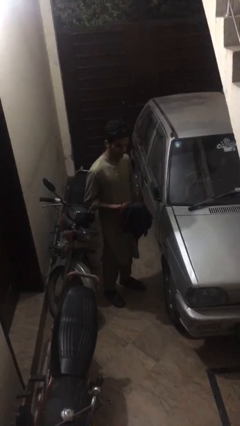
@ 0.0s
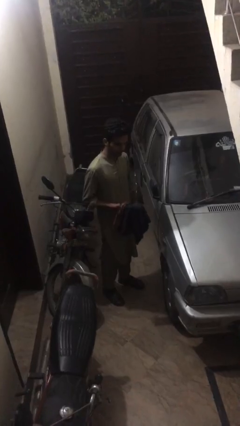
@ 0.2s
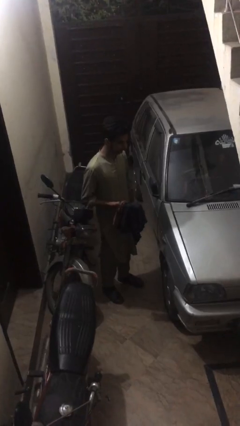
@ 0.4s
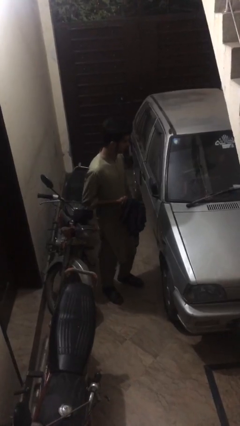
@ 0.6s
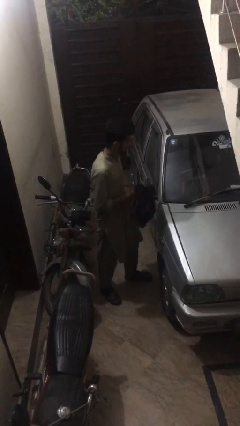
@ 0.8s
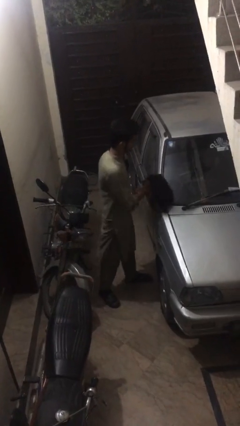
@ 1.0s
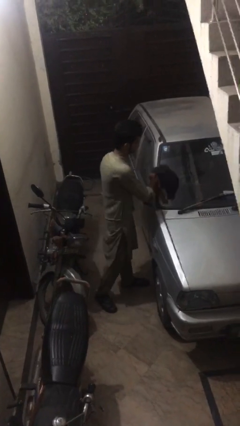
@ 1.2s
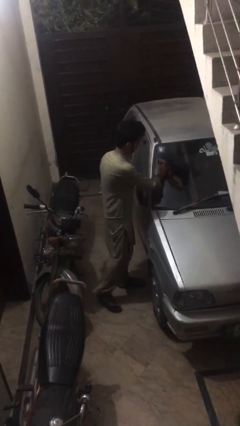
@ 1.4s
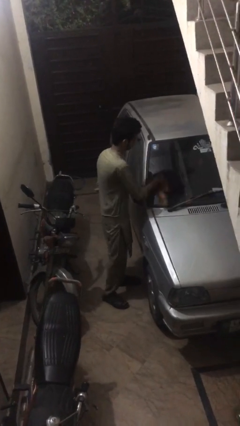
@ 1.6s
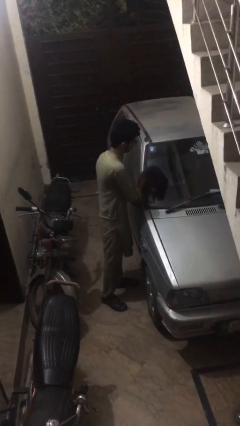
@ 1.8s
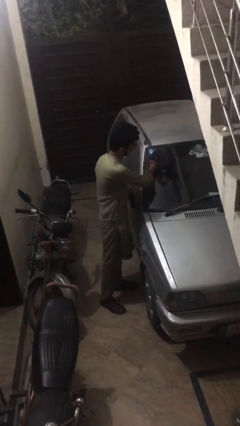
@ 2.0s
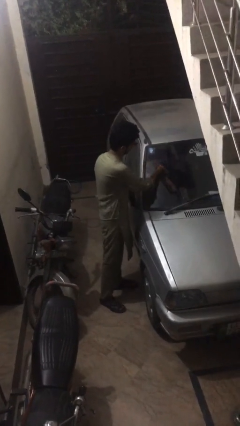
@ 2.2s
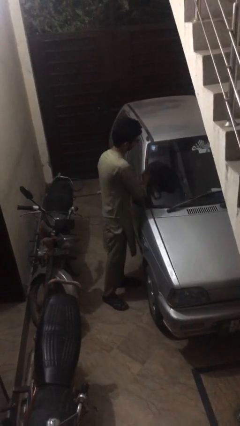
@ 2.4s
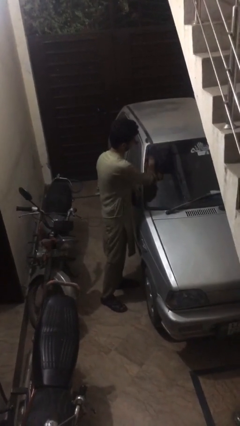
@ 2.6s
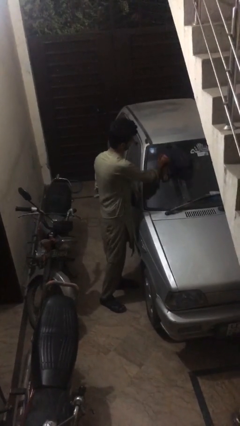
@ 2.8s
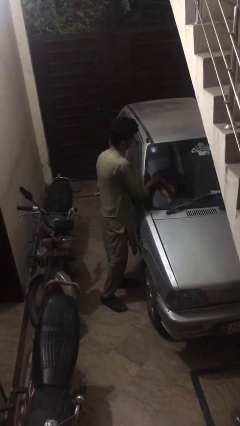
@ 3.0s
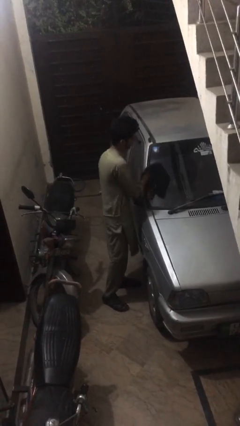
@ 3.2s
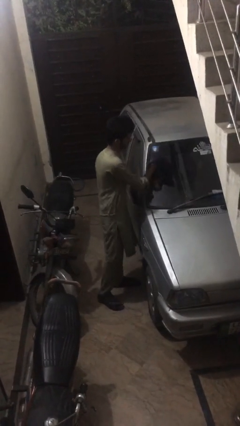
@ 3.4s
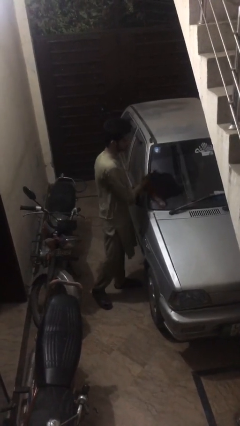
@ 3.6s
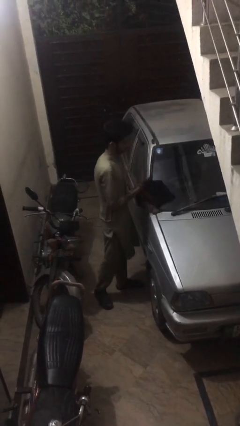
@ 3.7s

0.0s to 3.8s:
person polishes car with rag

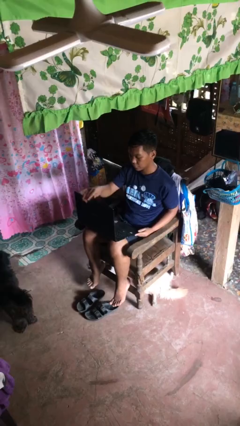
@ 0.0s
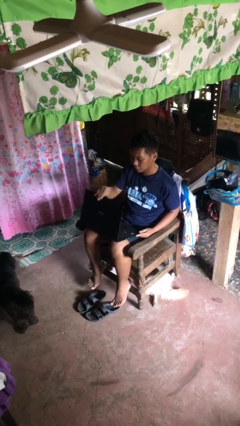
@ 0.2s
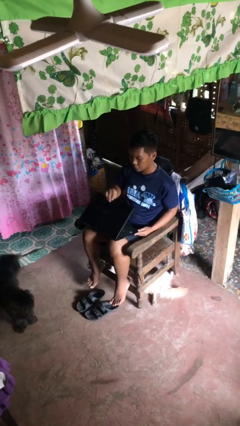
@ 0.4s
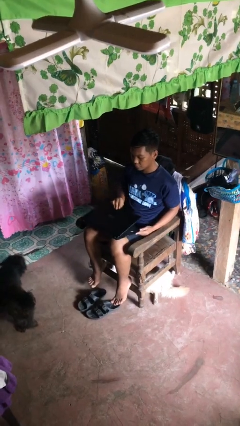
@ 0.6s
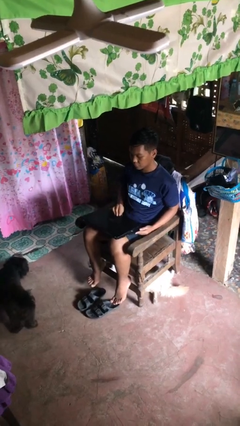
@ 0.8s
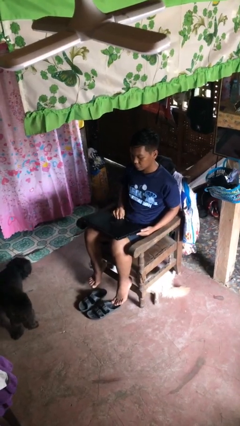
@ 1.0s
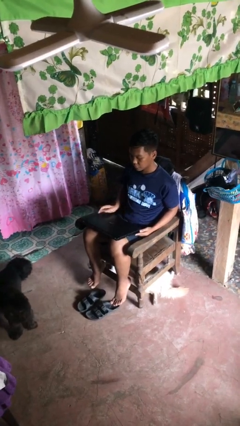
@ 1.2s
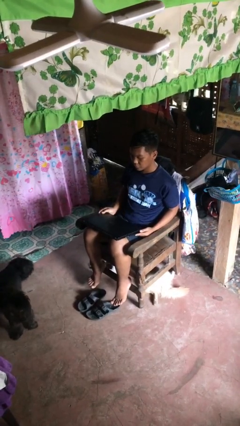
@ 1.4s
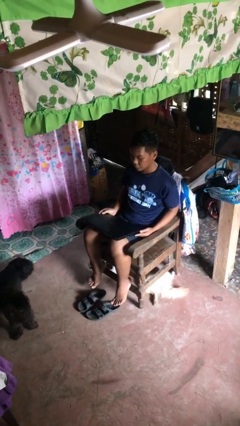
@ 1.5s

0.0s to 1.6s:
person closes laptop

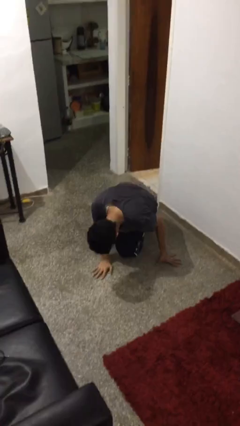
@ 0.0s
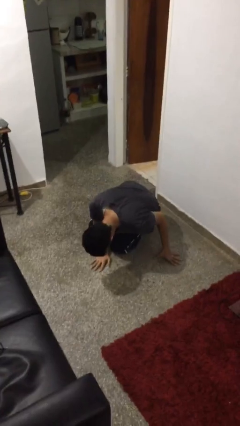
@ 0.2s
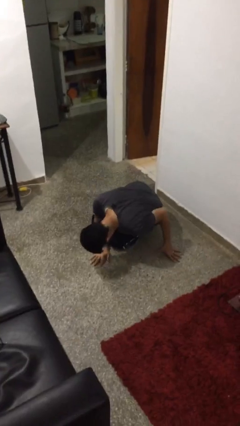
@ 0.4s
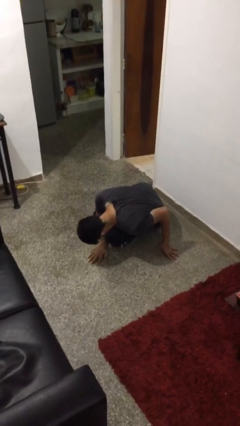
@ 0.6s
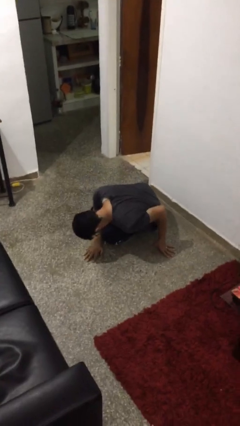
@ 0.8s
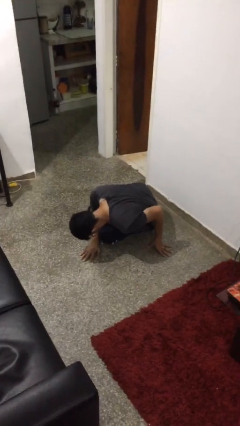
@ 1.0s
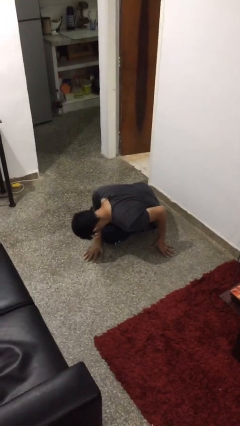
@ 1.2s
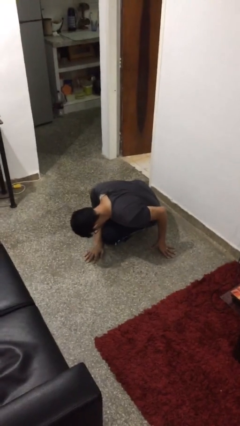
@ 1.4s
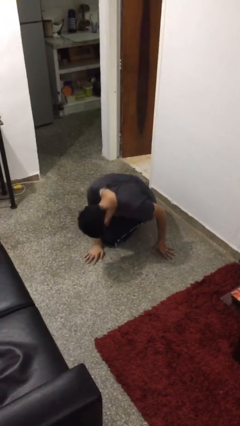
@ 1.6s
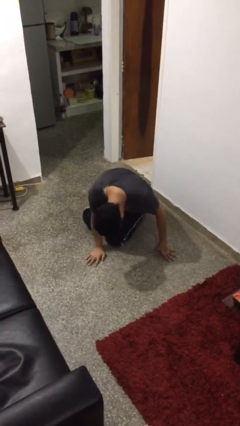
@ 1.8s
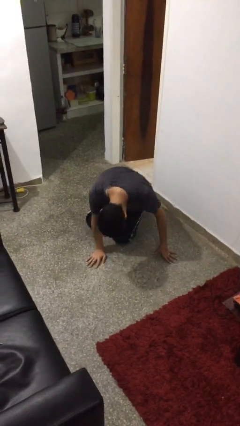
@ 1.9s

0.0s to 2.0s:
person lies down on floor

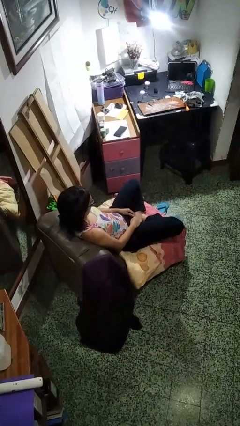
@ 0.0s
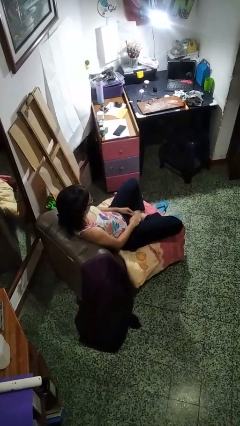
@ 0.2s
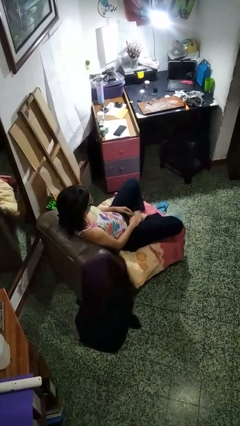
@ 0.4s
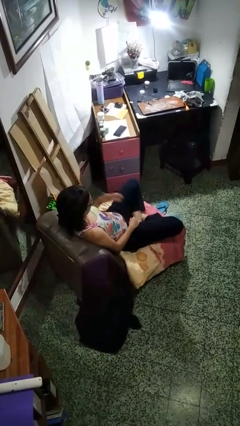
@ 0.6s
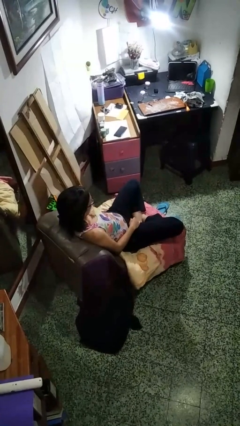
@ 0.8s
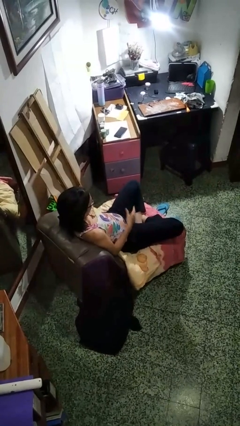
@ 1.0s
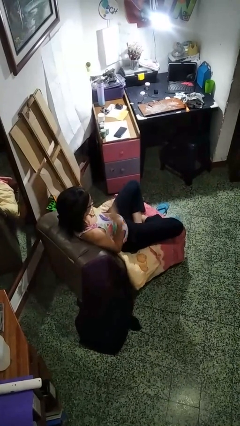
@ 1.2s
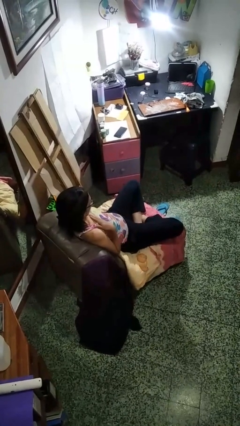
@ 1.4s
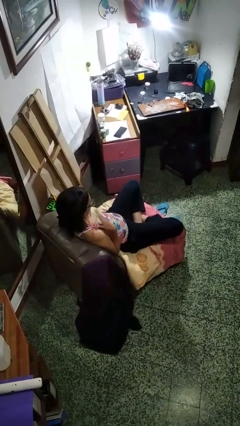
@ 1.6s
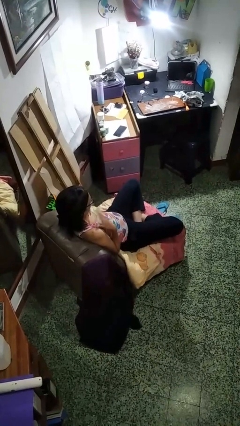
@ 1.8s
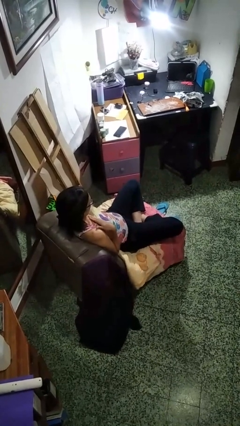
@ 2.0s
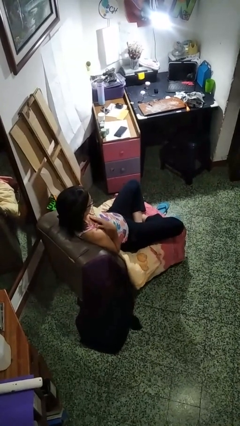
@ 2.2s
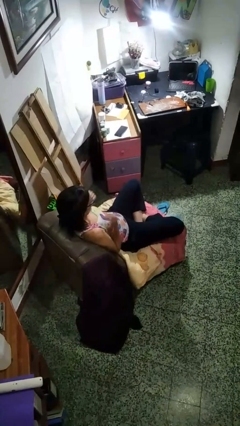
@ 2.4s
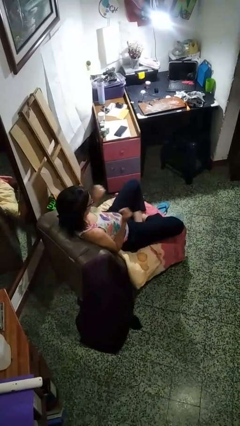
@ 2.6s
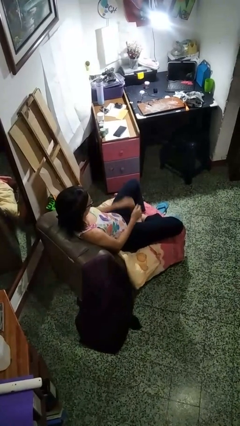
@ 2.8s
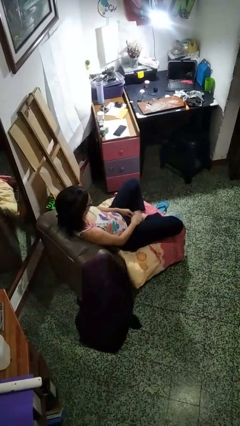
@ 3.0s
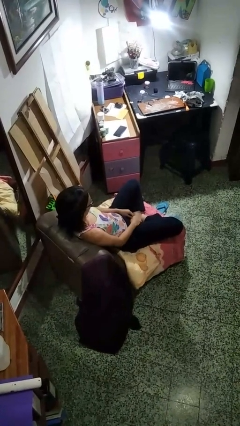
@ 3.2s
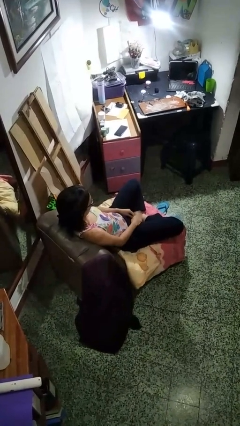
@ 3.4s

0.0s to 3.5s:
person drums on chest

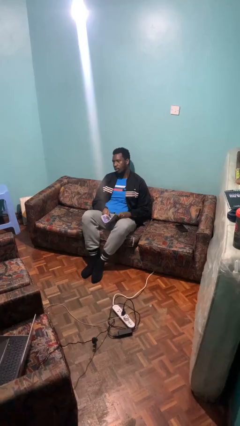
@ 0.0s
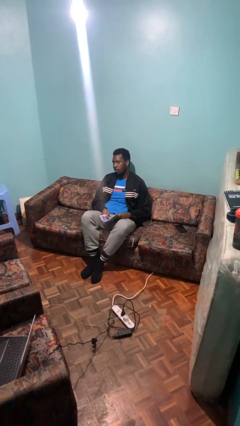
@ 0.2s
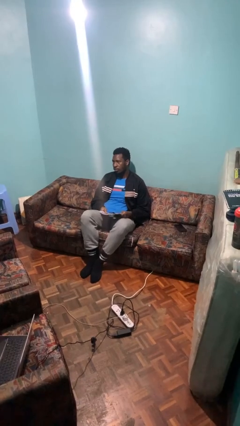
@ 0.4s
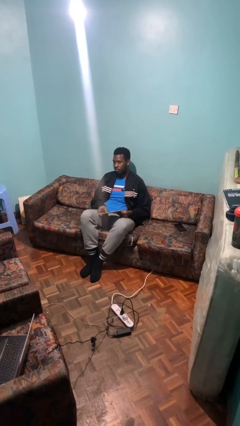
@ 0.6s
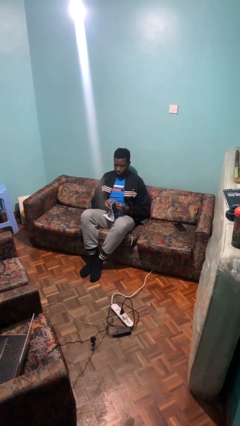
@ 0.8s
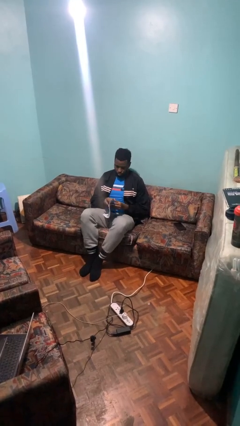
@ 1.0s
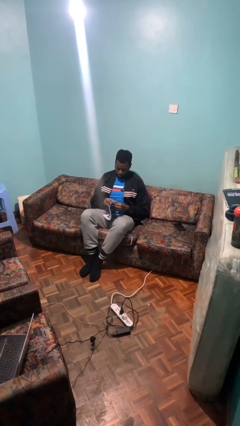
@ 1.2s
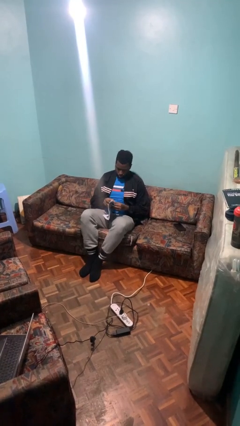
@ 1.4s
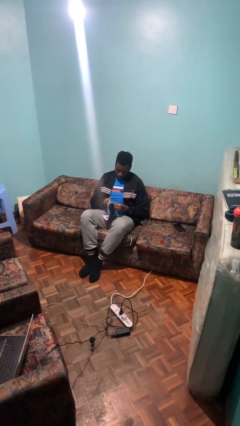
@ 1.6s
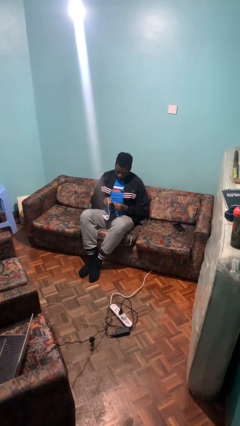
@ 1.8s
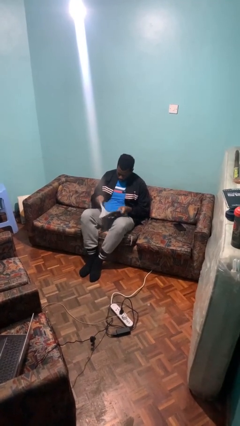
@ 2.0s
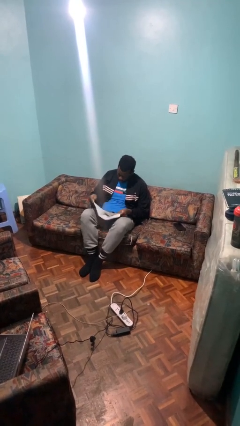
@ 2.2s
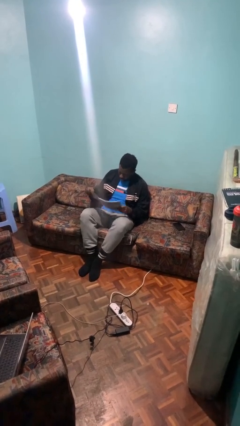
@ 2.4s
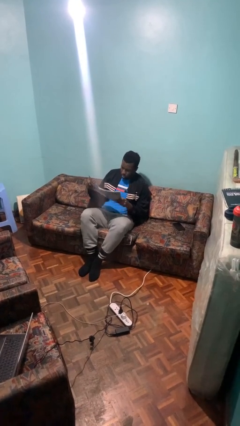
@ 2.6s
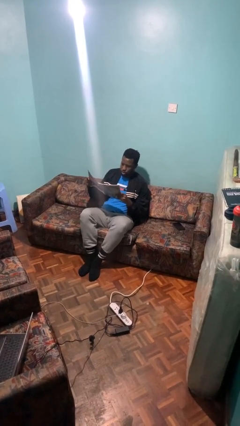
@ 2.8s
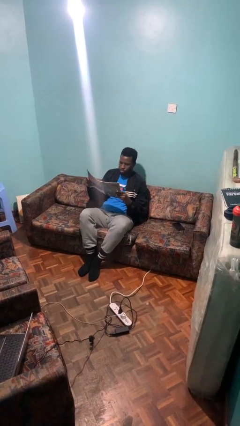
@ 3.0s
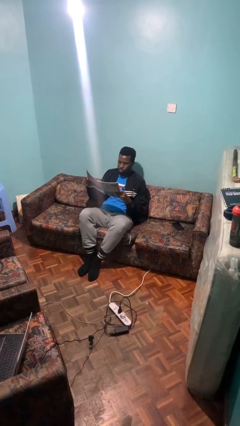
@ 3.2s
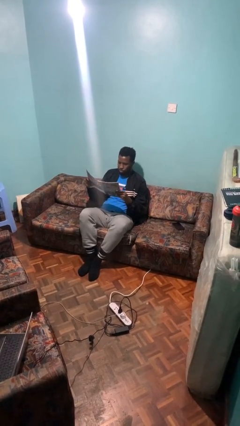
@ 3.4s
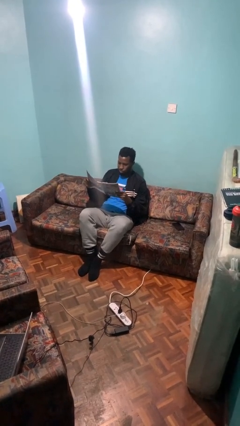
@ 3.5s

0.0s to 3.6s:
person reads magazine

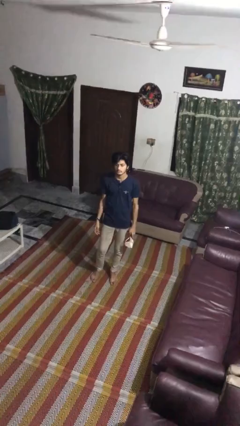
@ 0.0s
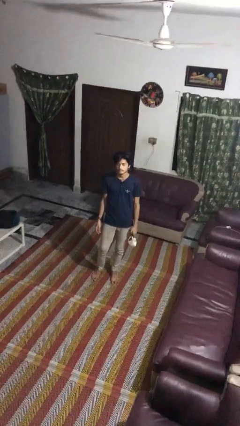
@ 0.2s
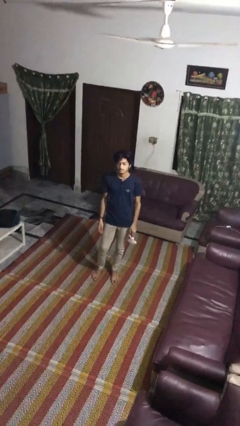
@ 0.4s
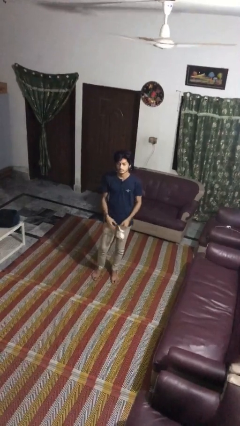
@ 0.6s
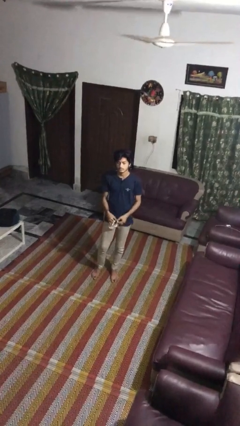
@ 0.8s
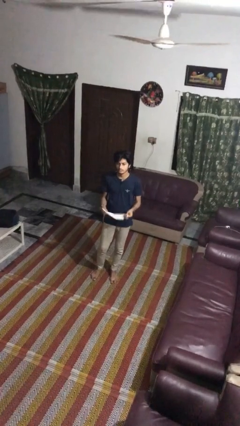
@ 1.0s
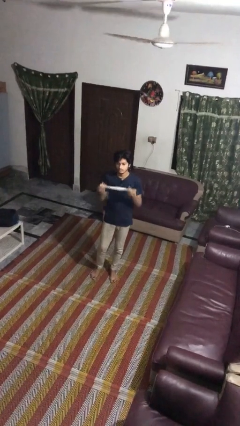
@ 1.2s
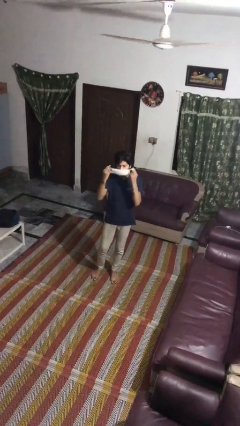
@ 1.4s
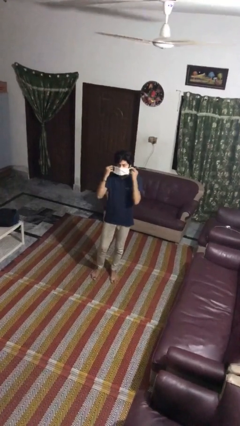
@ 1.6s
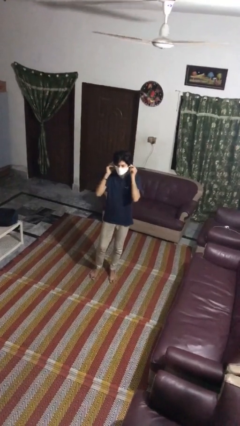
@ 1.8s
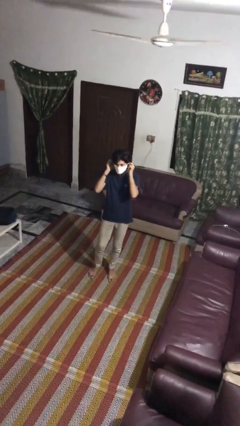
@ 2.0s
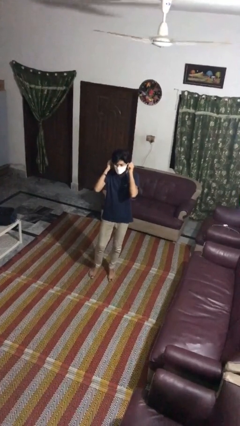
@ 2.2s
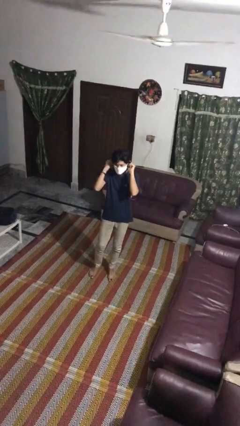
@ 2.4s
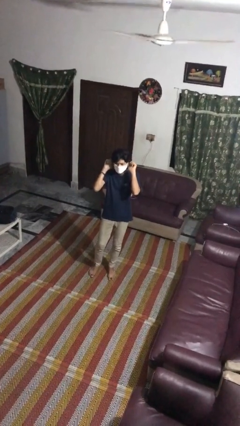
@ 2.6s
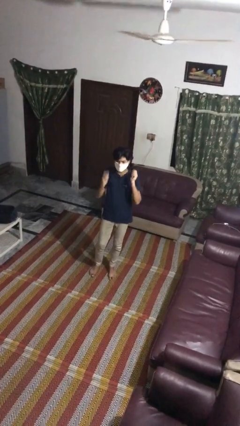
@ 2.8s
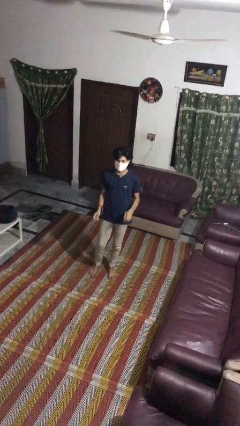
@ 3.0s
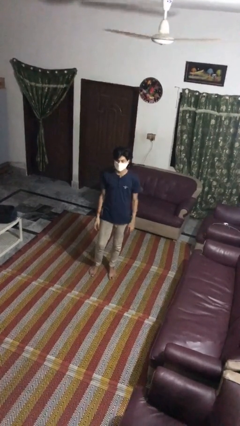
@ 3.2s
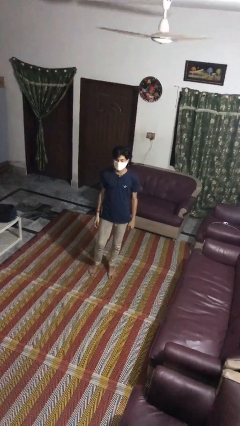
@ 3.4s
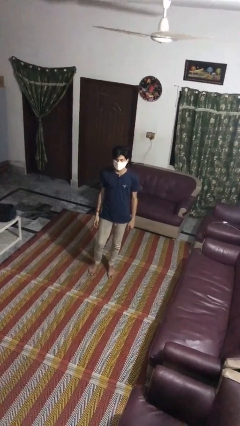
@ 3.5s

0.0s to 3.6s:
person puts on facemask
